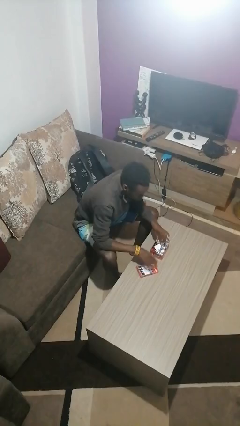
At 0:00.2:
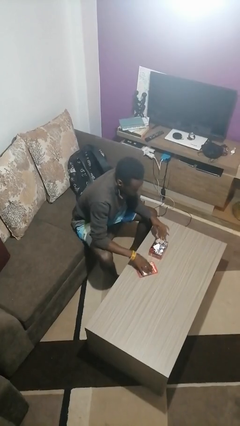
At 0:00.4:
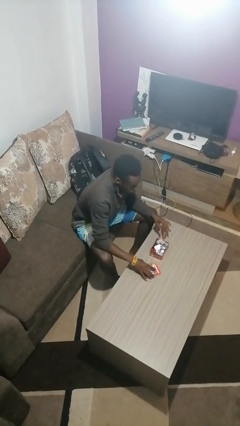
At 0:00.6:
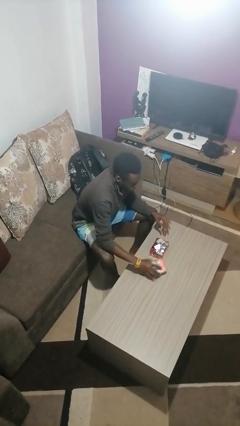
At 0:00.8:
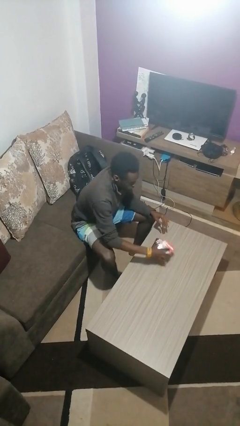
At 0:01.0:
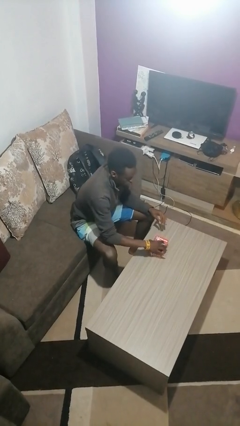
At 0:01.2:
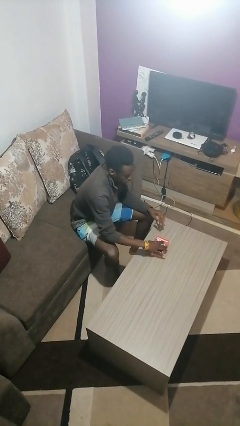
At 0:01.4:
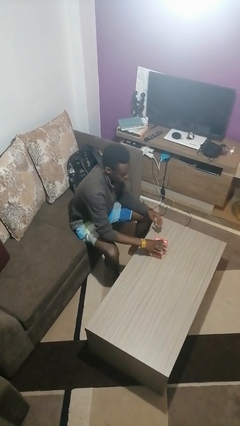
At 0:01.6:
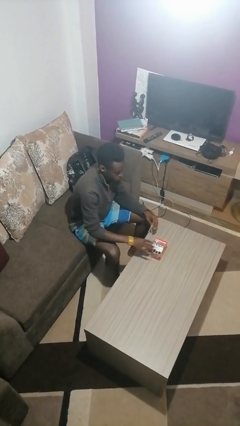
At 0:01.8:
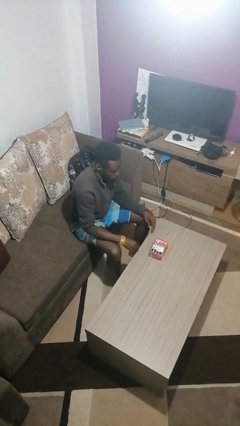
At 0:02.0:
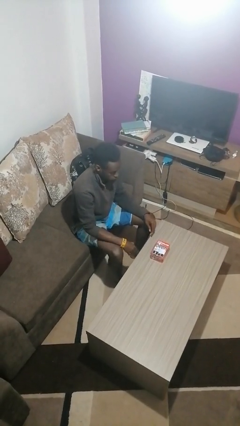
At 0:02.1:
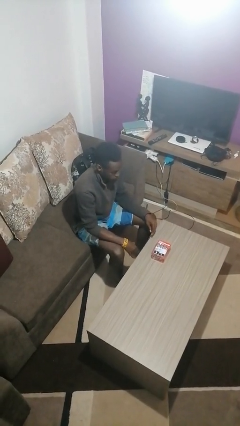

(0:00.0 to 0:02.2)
person closes jewelry box

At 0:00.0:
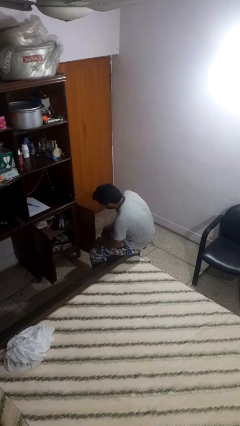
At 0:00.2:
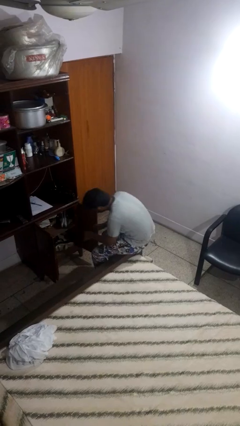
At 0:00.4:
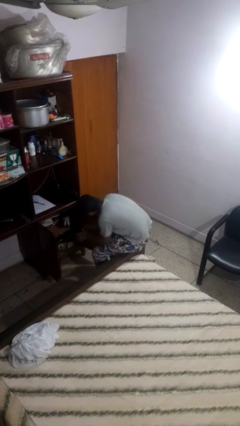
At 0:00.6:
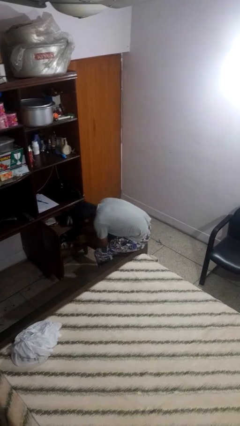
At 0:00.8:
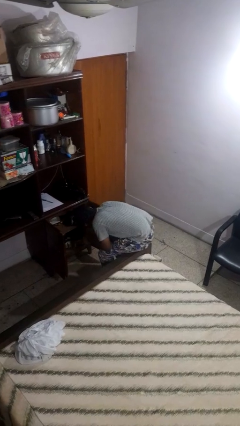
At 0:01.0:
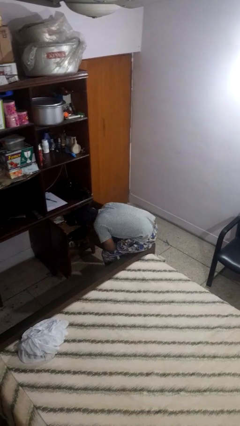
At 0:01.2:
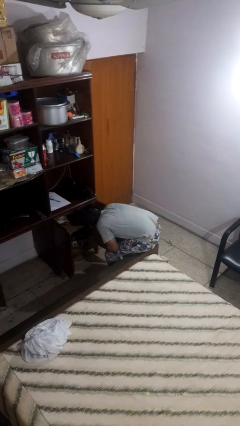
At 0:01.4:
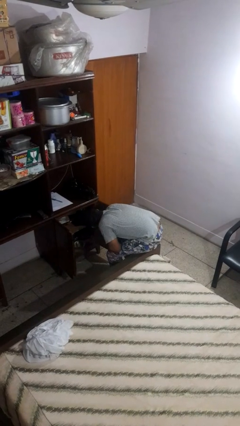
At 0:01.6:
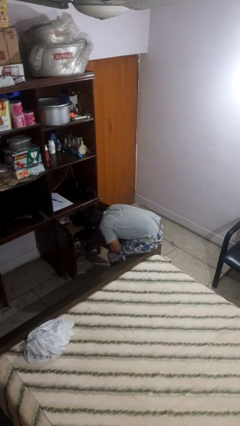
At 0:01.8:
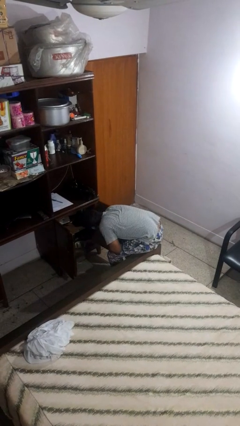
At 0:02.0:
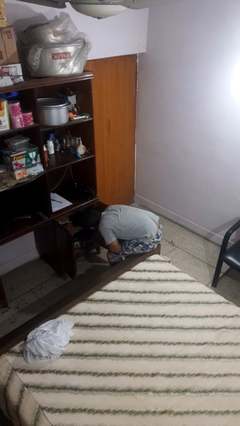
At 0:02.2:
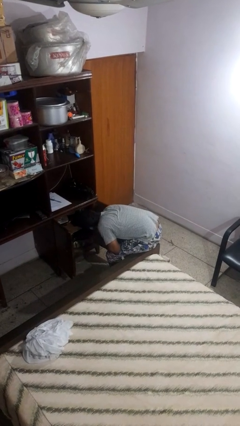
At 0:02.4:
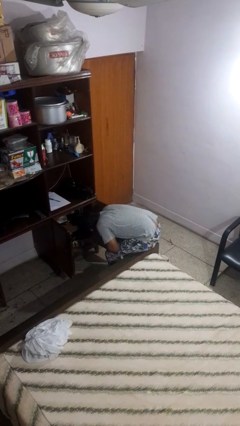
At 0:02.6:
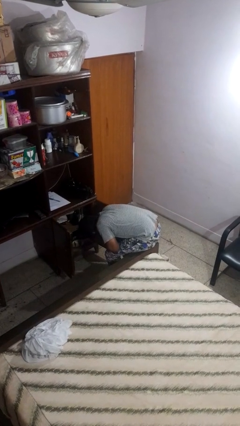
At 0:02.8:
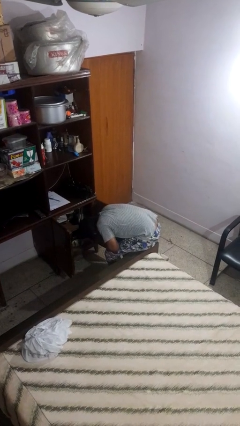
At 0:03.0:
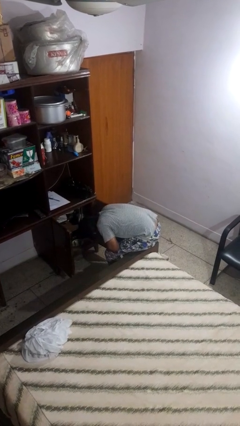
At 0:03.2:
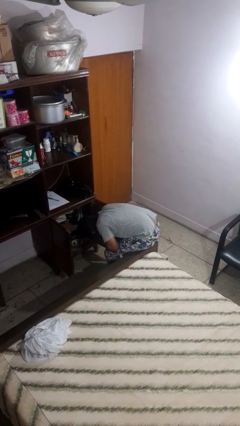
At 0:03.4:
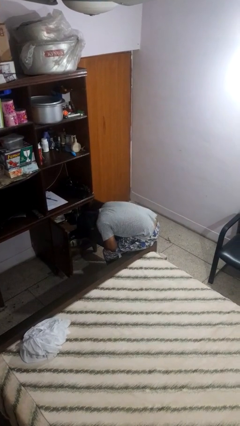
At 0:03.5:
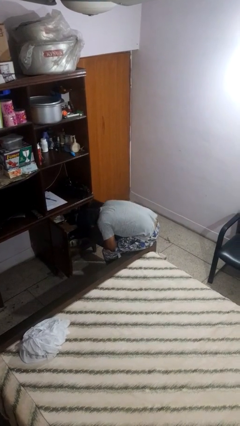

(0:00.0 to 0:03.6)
person searches in cabinet

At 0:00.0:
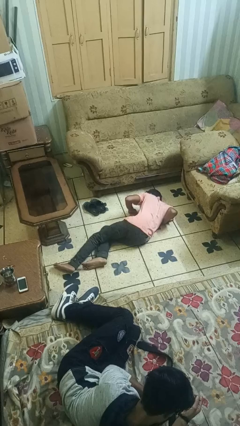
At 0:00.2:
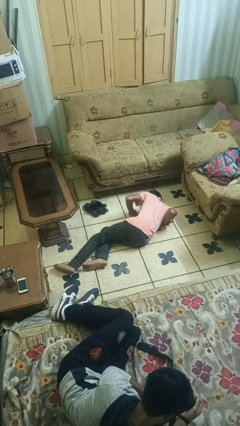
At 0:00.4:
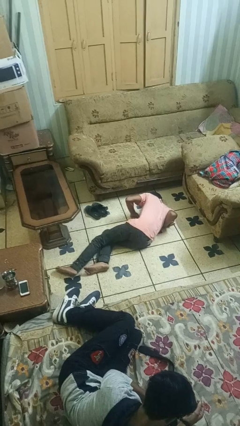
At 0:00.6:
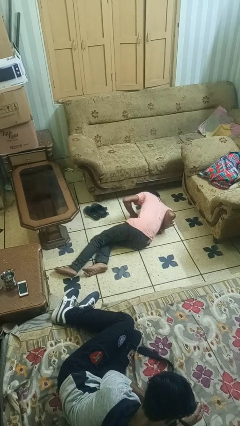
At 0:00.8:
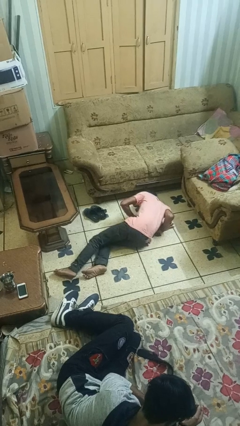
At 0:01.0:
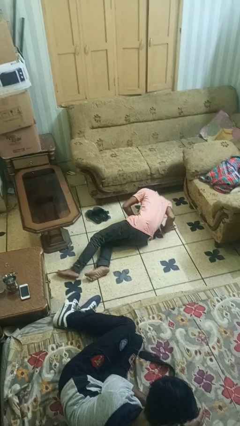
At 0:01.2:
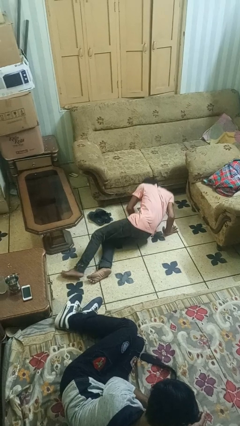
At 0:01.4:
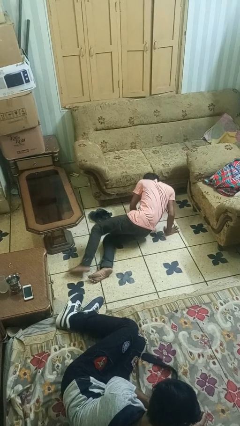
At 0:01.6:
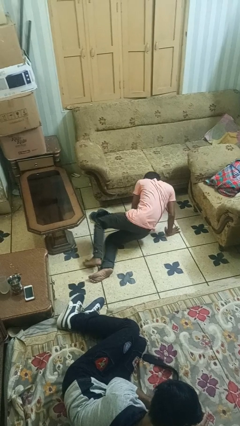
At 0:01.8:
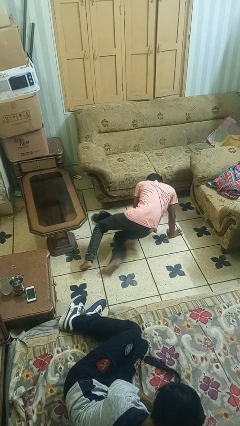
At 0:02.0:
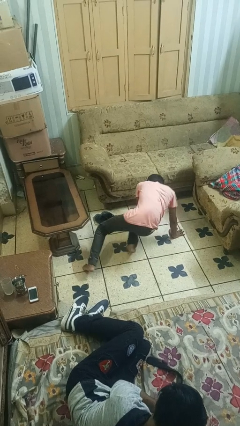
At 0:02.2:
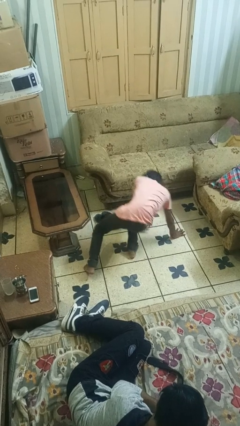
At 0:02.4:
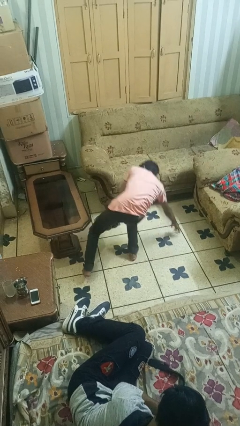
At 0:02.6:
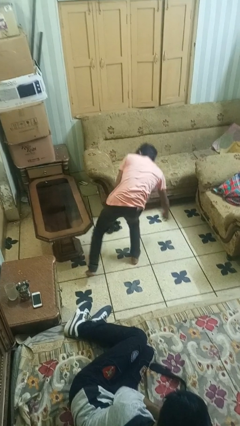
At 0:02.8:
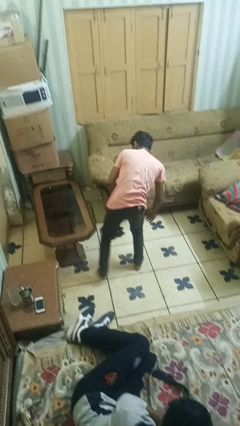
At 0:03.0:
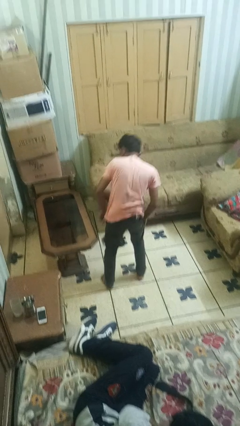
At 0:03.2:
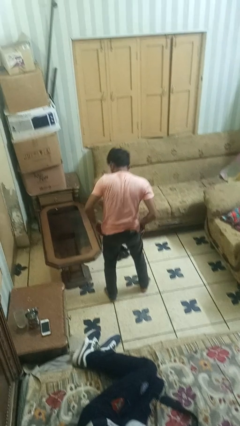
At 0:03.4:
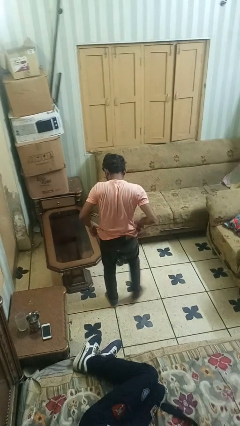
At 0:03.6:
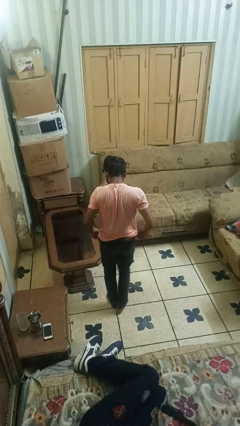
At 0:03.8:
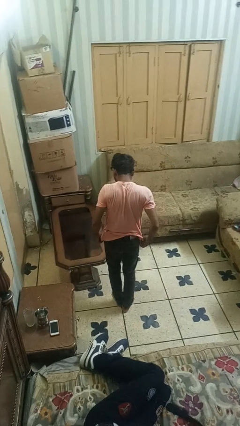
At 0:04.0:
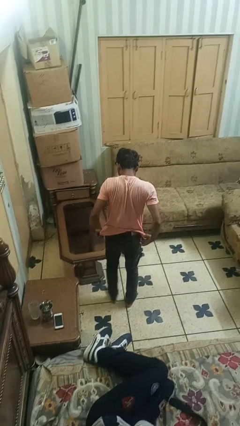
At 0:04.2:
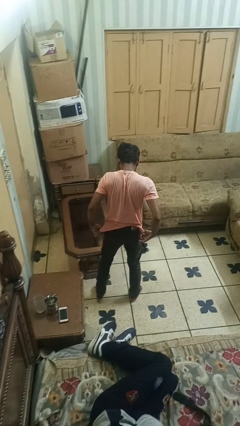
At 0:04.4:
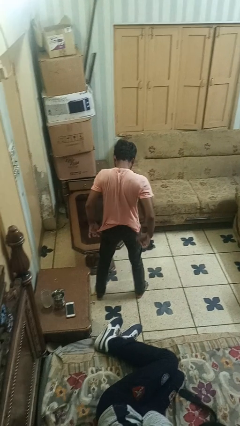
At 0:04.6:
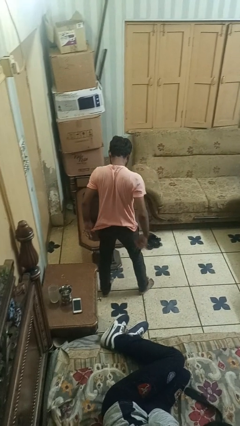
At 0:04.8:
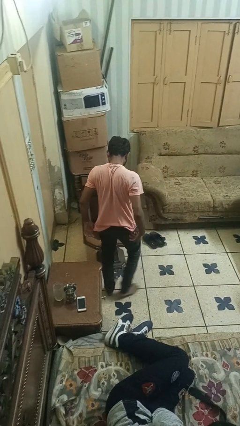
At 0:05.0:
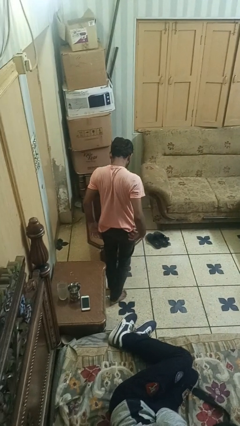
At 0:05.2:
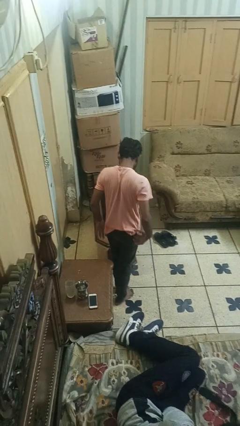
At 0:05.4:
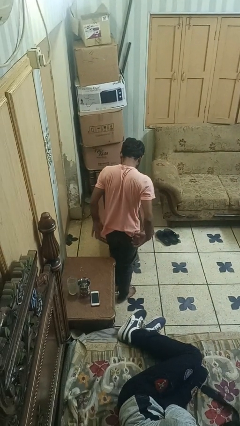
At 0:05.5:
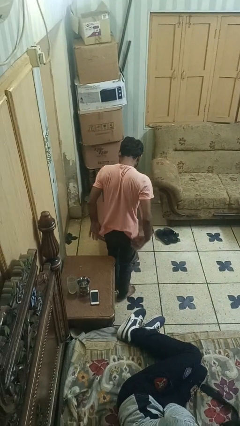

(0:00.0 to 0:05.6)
person stands up from floor

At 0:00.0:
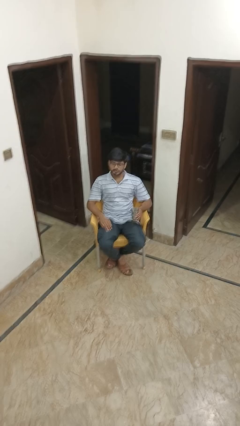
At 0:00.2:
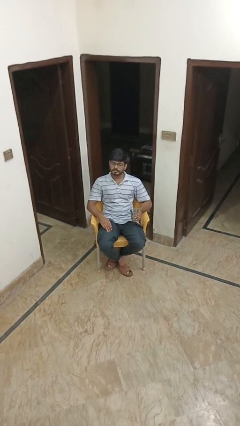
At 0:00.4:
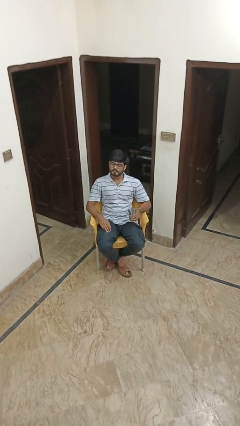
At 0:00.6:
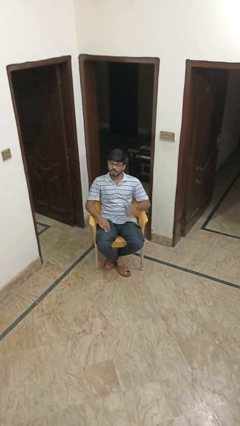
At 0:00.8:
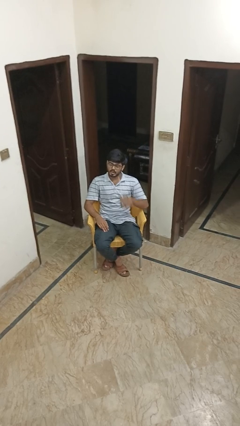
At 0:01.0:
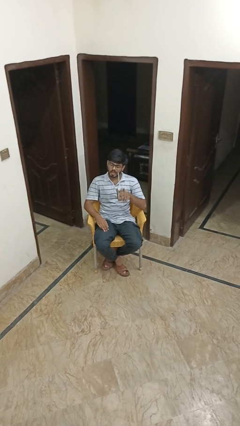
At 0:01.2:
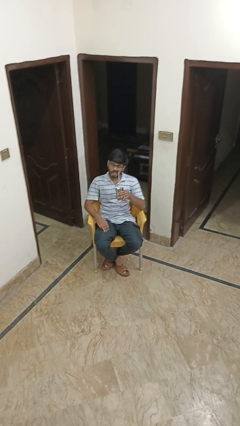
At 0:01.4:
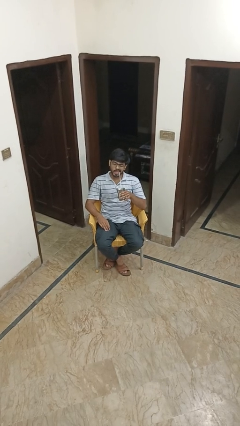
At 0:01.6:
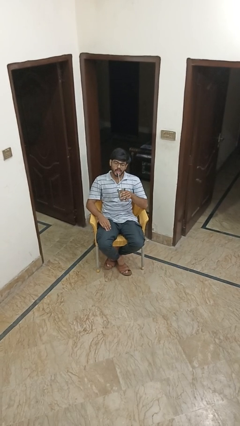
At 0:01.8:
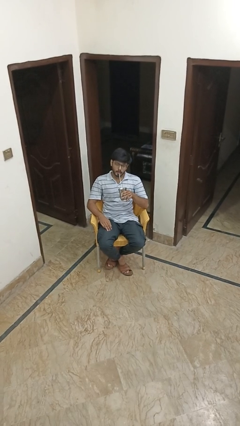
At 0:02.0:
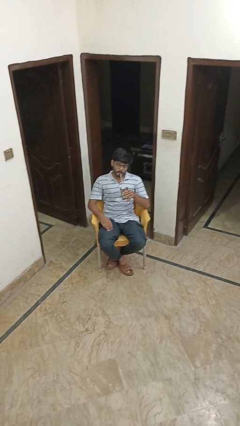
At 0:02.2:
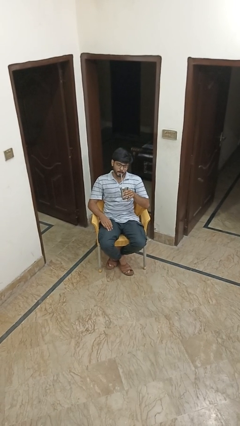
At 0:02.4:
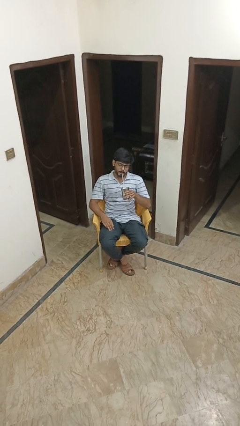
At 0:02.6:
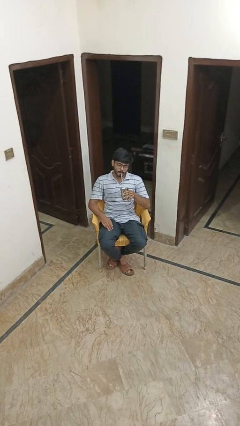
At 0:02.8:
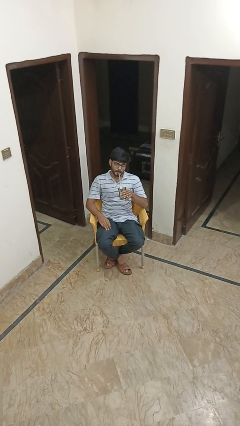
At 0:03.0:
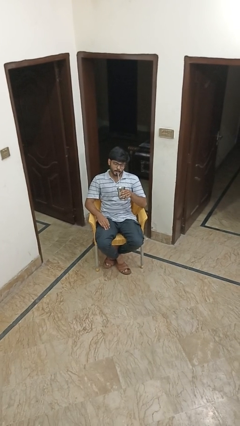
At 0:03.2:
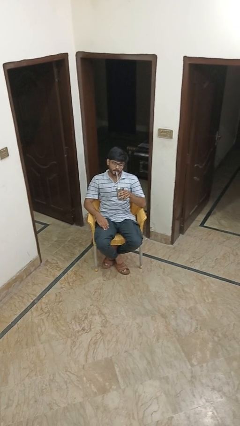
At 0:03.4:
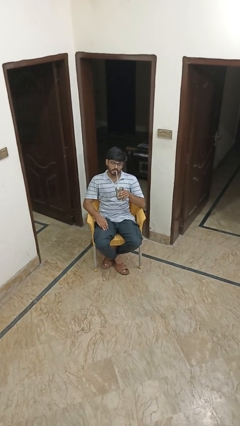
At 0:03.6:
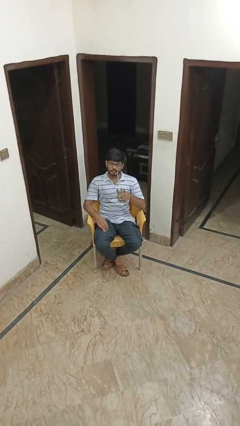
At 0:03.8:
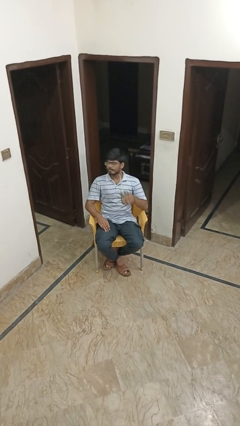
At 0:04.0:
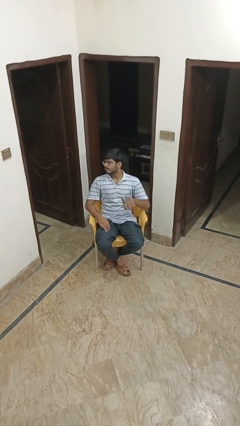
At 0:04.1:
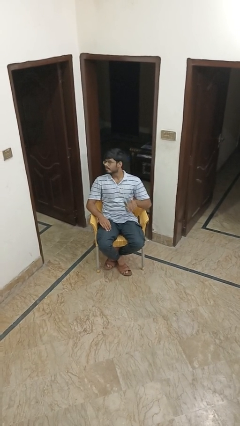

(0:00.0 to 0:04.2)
person drinks from straw

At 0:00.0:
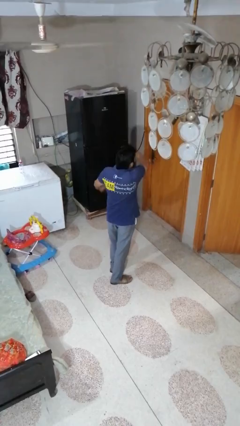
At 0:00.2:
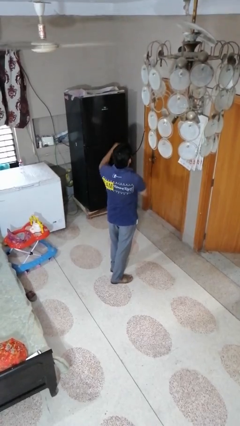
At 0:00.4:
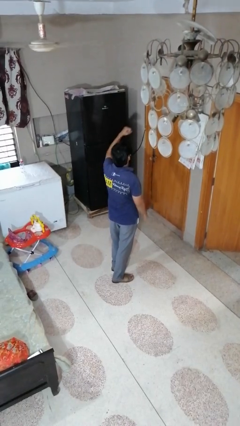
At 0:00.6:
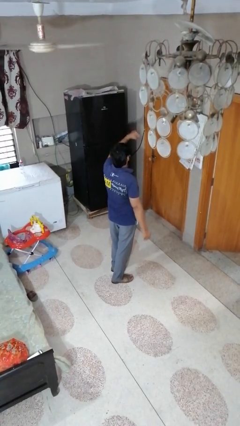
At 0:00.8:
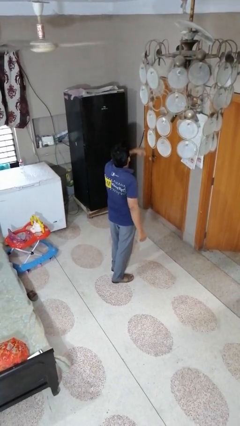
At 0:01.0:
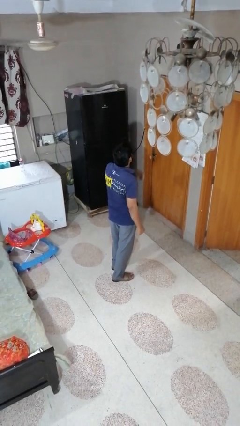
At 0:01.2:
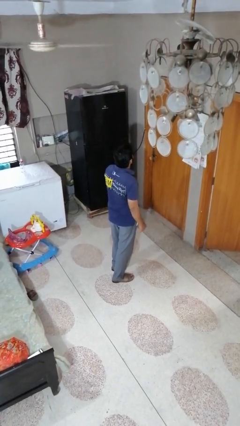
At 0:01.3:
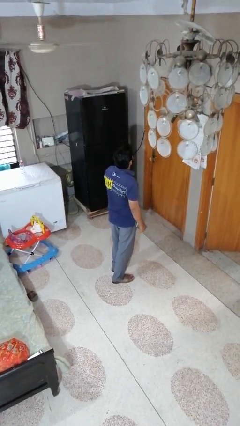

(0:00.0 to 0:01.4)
person punches
